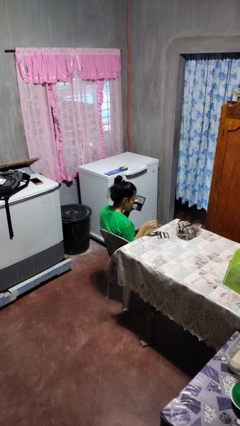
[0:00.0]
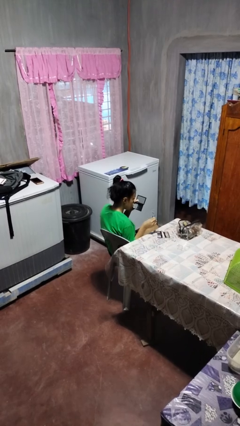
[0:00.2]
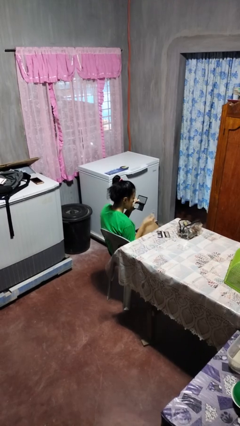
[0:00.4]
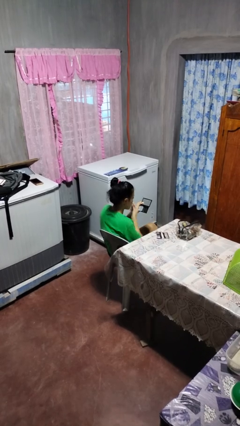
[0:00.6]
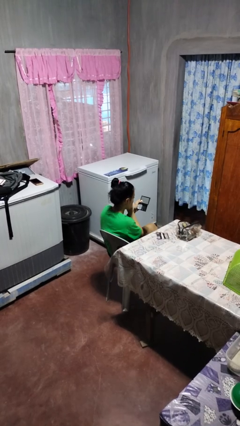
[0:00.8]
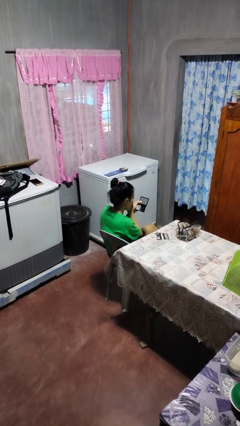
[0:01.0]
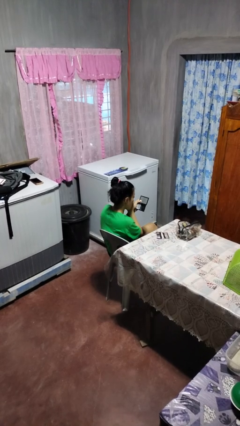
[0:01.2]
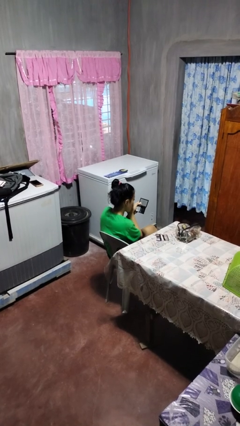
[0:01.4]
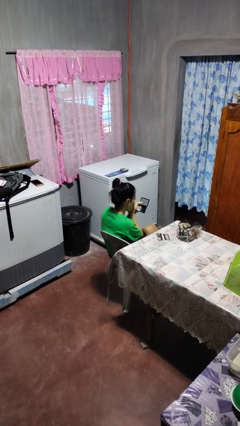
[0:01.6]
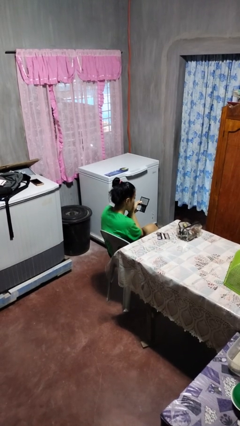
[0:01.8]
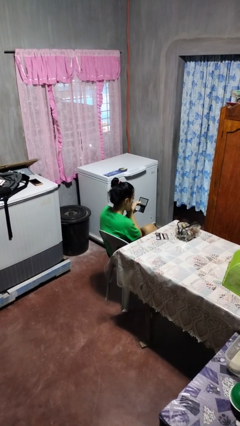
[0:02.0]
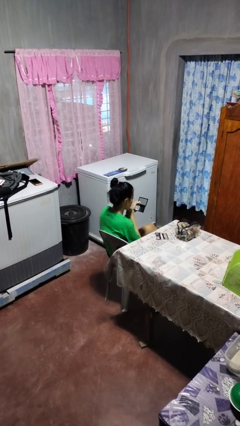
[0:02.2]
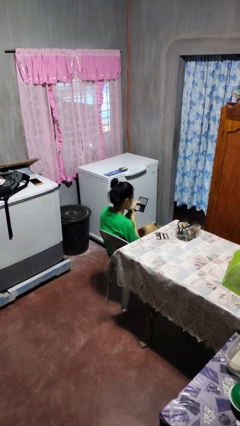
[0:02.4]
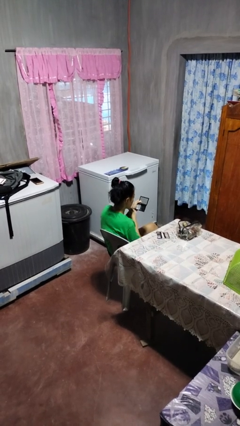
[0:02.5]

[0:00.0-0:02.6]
person applies eye makeup

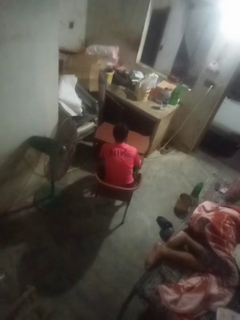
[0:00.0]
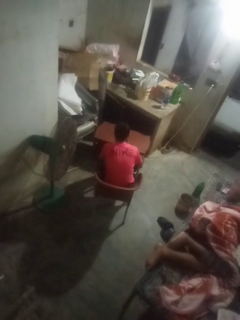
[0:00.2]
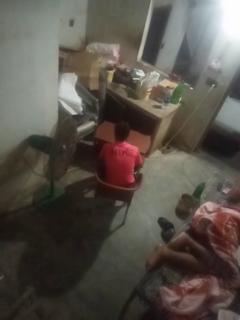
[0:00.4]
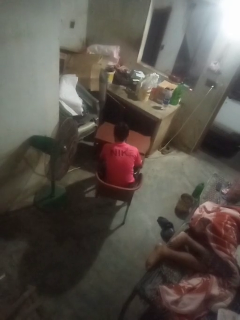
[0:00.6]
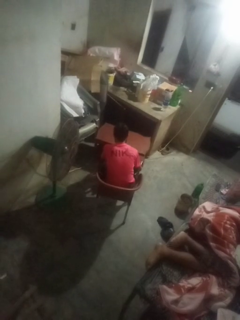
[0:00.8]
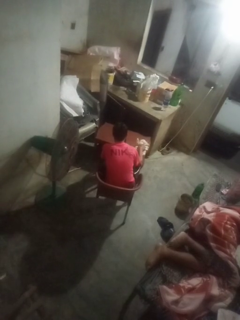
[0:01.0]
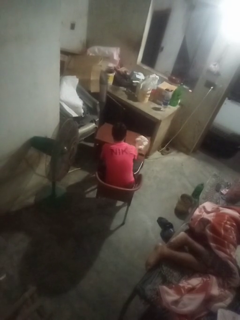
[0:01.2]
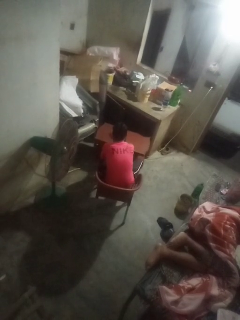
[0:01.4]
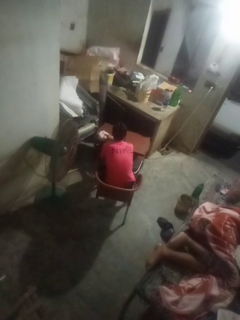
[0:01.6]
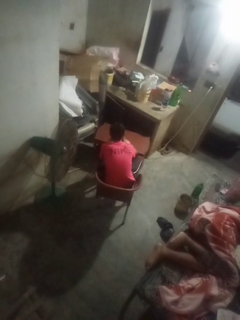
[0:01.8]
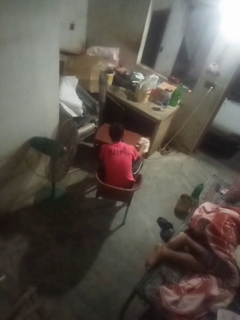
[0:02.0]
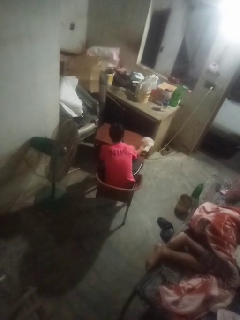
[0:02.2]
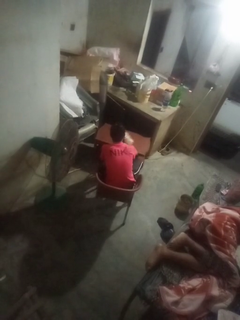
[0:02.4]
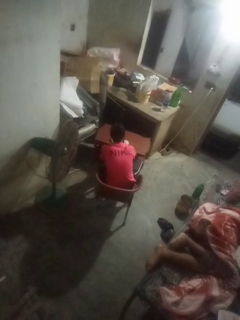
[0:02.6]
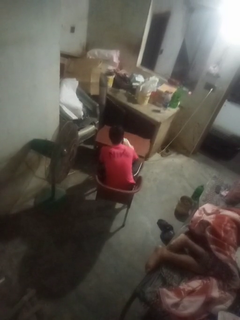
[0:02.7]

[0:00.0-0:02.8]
person cleans table with rag

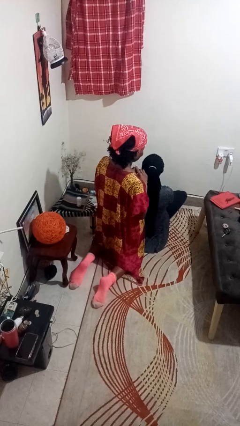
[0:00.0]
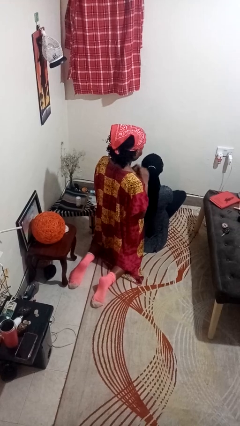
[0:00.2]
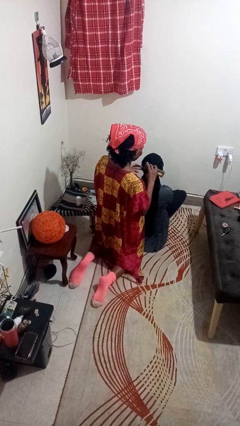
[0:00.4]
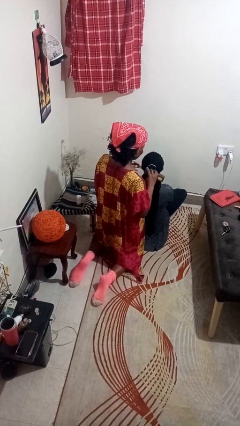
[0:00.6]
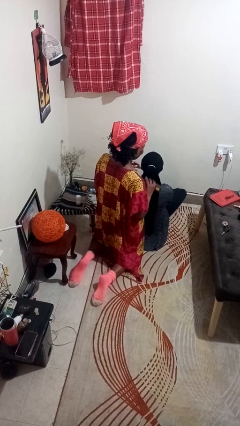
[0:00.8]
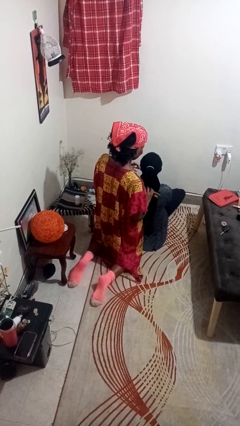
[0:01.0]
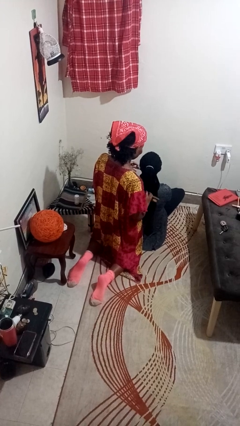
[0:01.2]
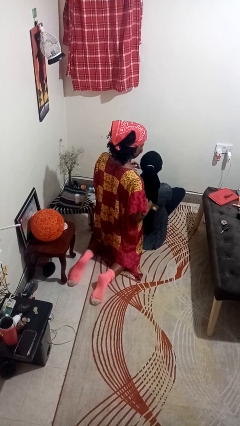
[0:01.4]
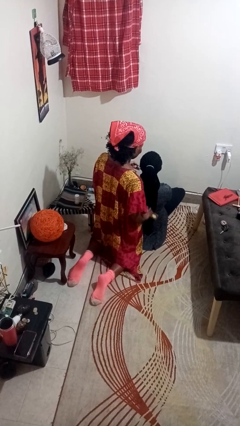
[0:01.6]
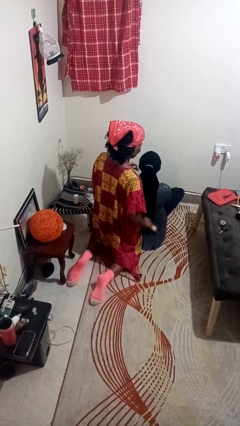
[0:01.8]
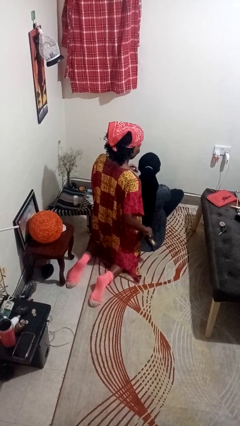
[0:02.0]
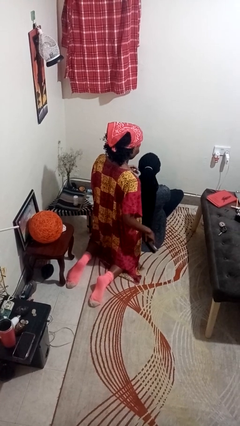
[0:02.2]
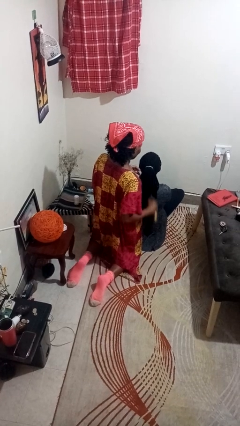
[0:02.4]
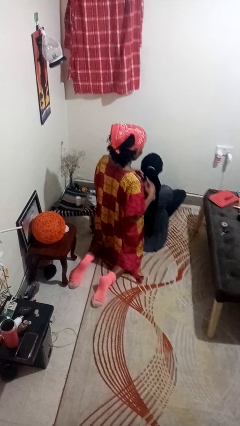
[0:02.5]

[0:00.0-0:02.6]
person brushes hair of person

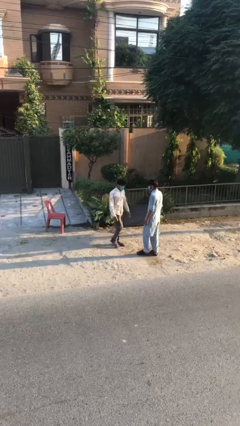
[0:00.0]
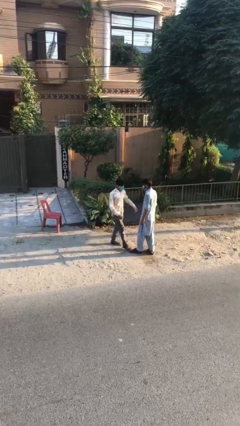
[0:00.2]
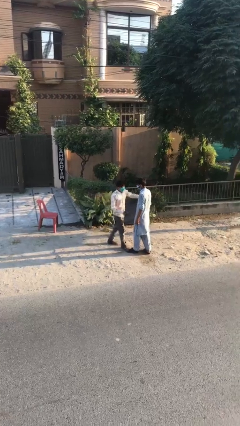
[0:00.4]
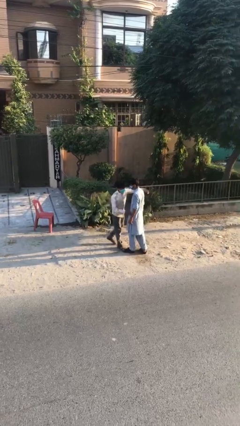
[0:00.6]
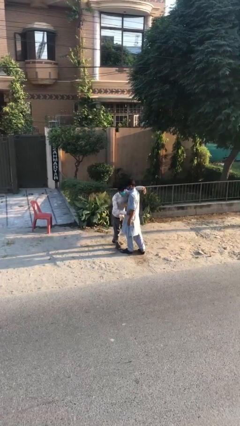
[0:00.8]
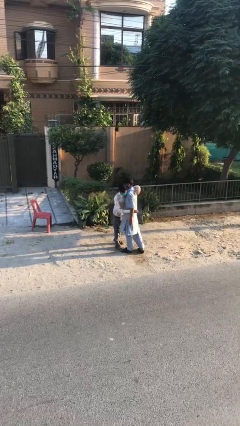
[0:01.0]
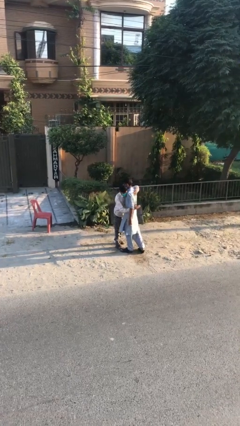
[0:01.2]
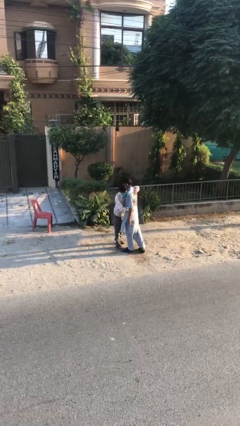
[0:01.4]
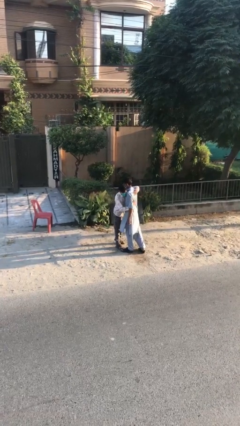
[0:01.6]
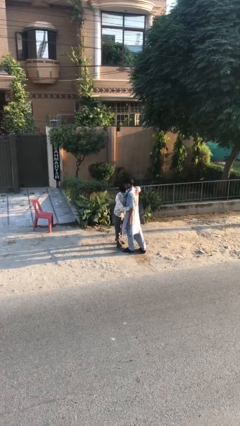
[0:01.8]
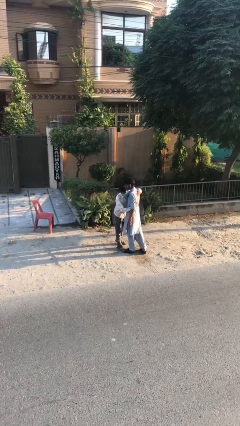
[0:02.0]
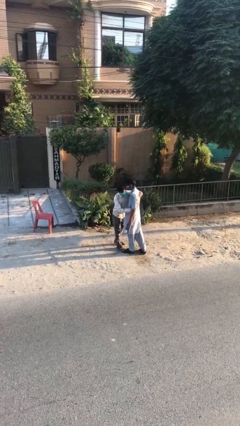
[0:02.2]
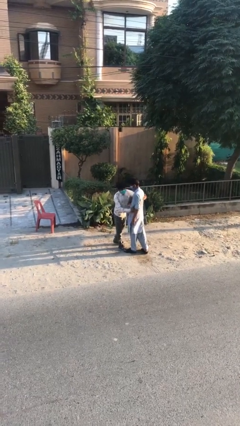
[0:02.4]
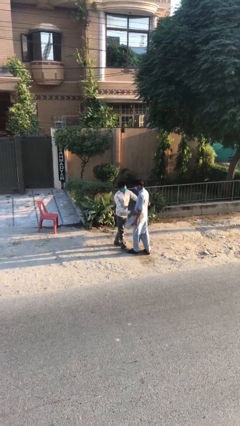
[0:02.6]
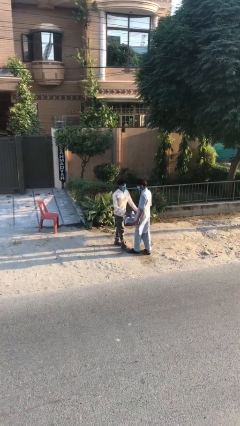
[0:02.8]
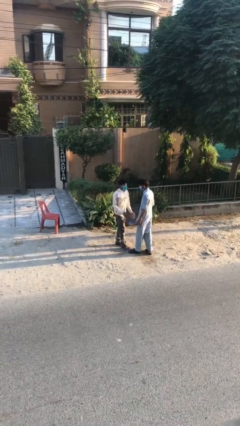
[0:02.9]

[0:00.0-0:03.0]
person embraces person

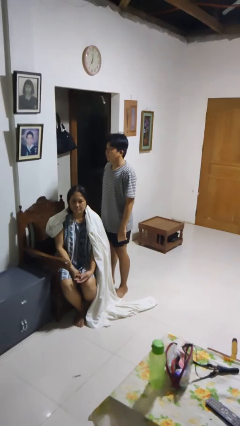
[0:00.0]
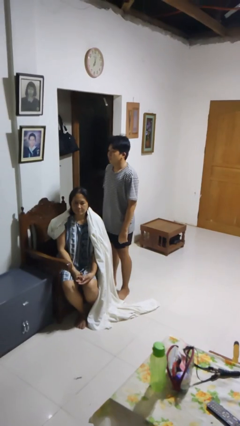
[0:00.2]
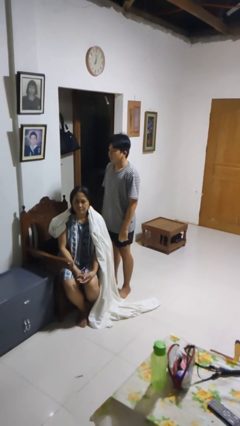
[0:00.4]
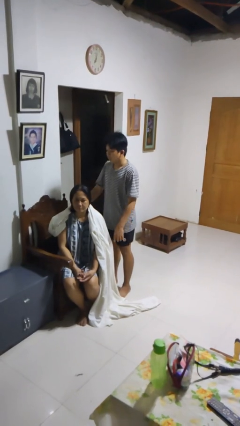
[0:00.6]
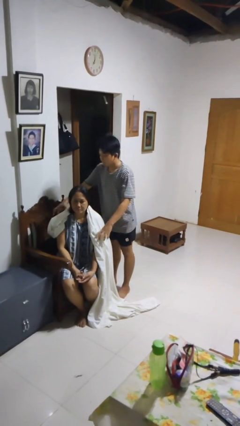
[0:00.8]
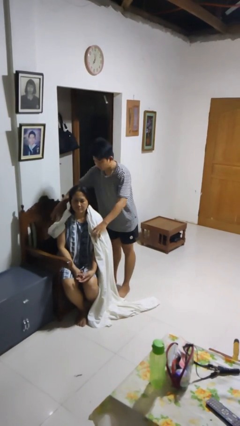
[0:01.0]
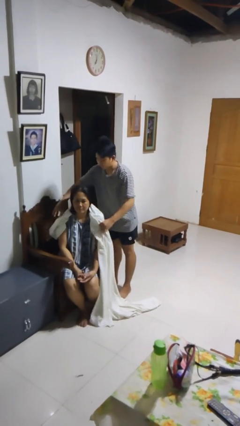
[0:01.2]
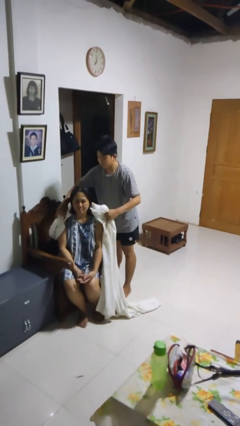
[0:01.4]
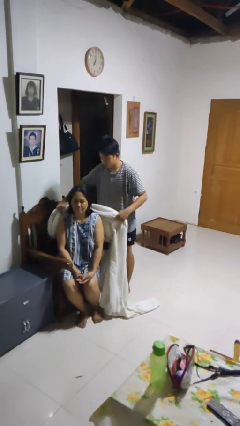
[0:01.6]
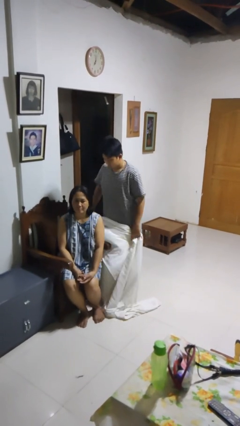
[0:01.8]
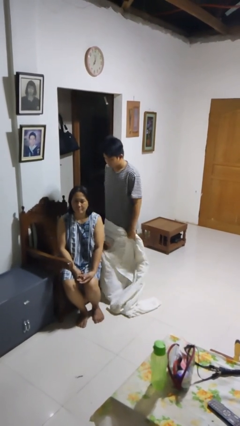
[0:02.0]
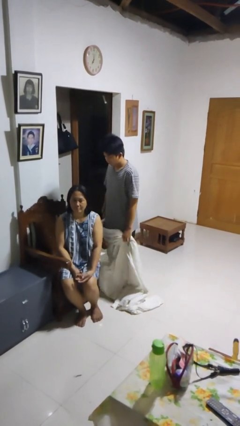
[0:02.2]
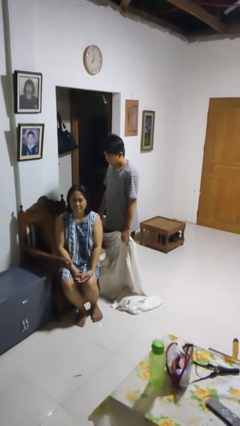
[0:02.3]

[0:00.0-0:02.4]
person uncovers friend with blanket

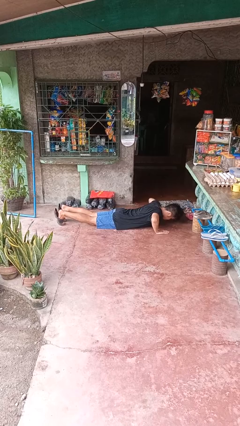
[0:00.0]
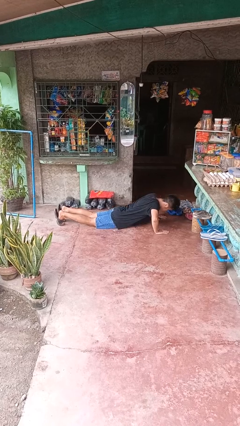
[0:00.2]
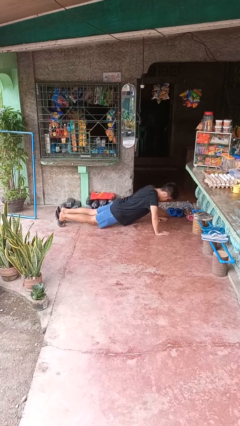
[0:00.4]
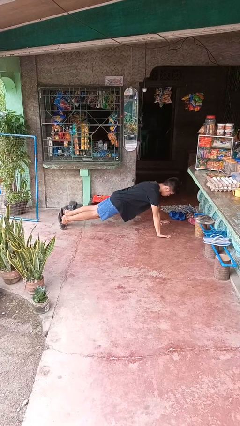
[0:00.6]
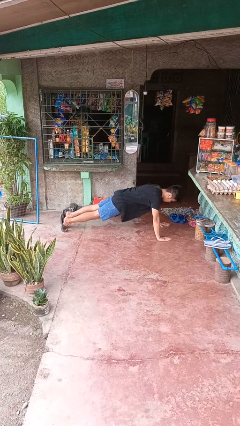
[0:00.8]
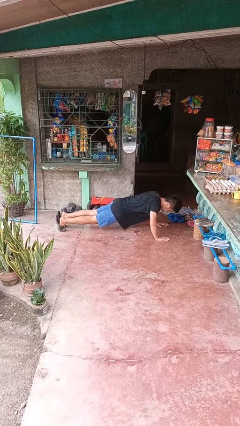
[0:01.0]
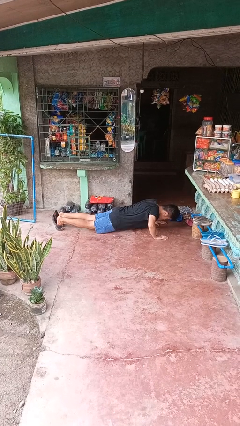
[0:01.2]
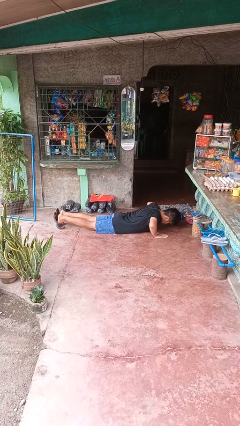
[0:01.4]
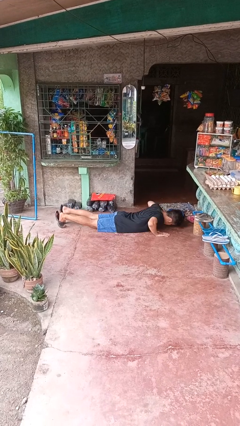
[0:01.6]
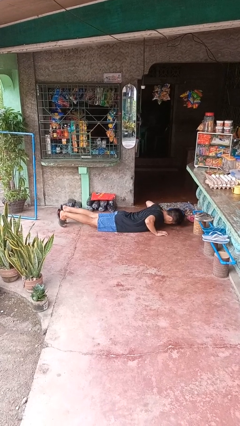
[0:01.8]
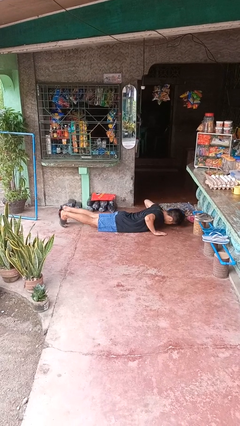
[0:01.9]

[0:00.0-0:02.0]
person exercises with pushup

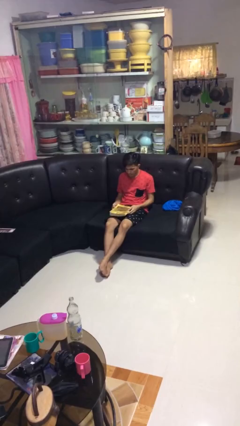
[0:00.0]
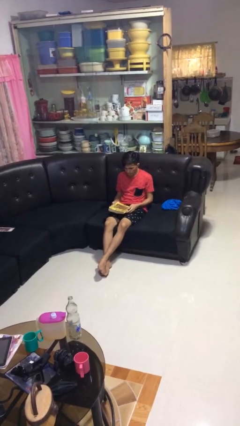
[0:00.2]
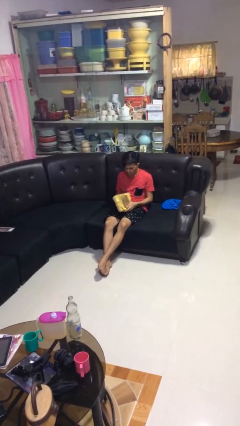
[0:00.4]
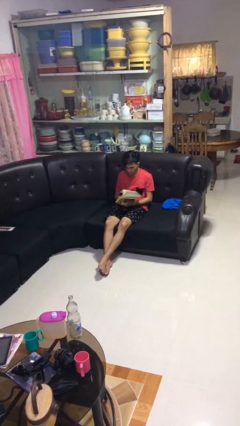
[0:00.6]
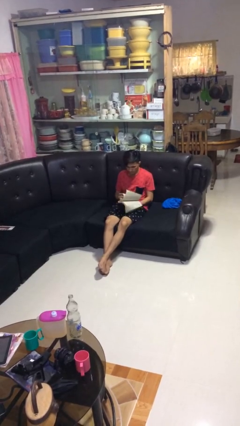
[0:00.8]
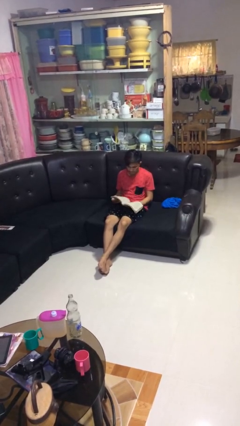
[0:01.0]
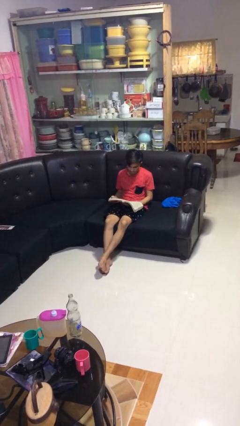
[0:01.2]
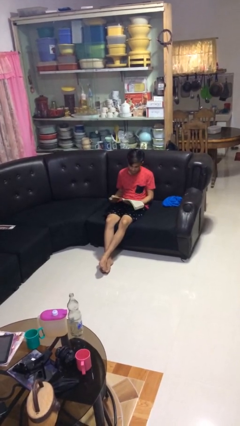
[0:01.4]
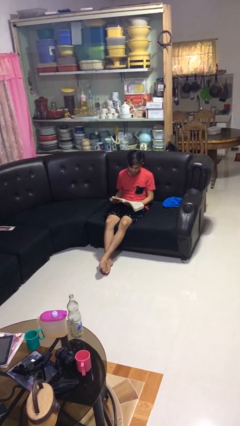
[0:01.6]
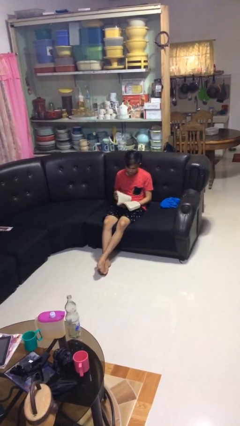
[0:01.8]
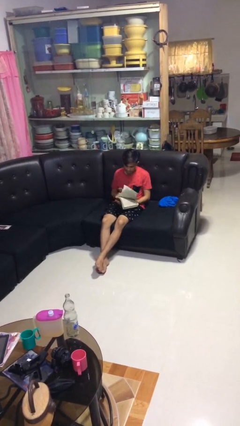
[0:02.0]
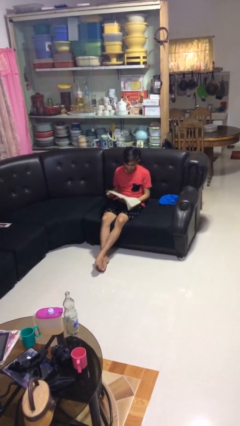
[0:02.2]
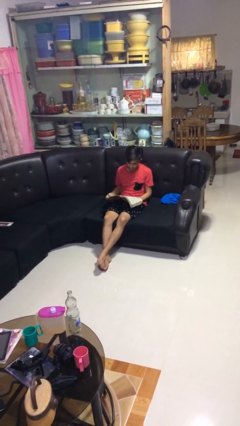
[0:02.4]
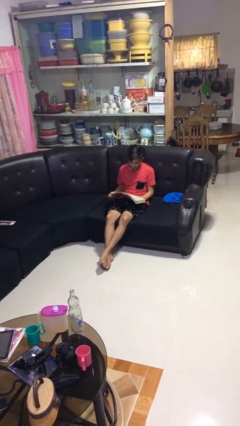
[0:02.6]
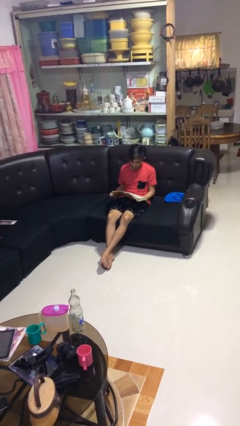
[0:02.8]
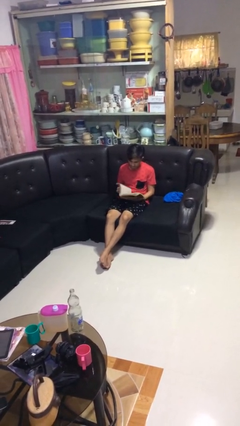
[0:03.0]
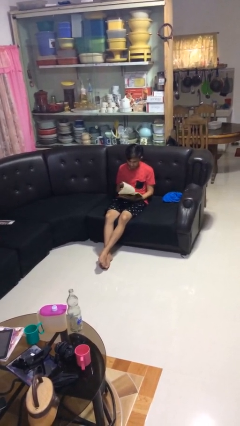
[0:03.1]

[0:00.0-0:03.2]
person reads book
